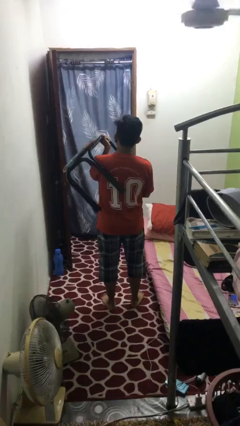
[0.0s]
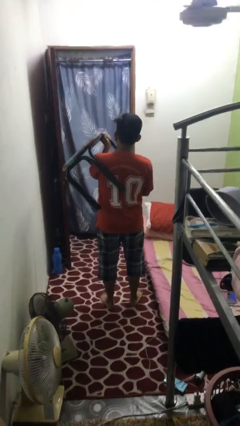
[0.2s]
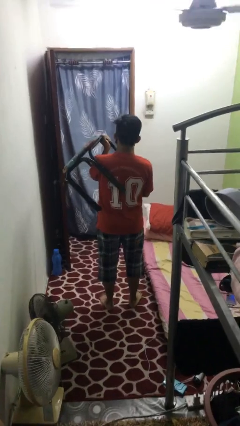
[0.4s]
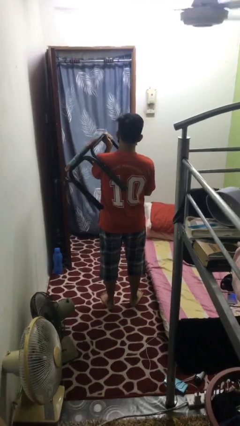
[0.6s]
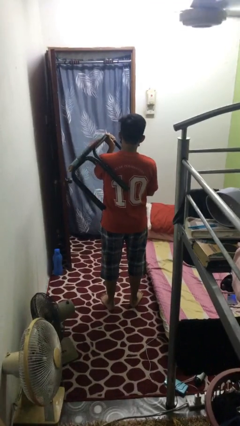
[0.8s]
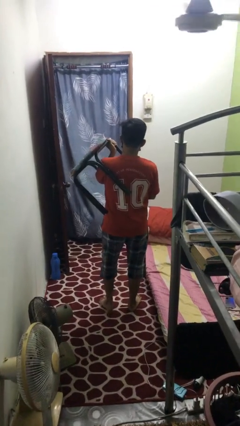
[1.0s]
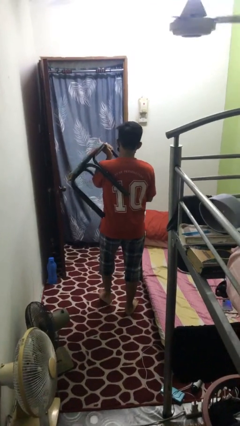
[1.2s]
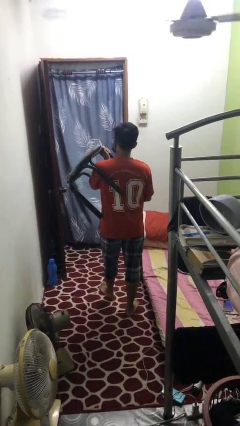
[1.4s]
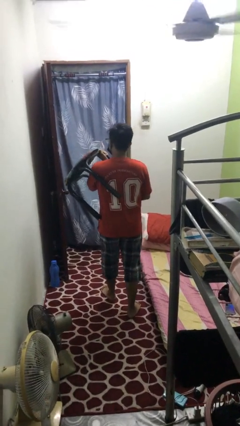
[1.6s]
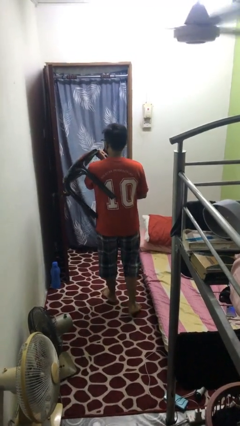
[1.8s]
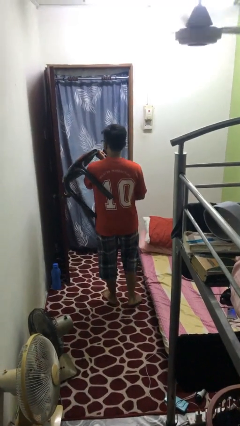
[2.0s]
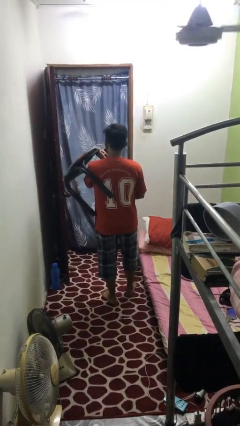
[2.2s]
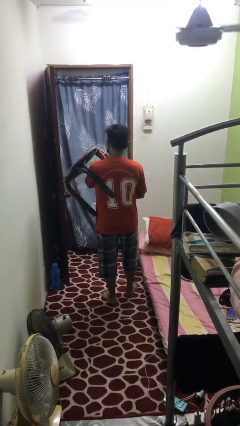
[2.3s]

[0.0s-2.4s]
person carries furniture

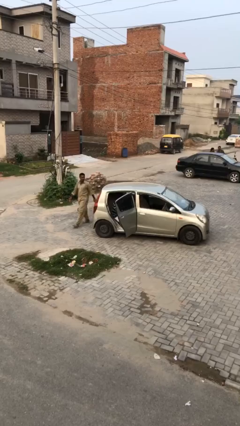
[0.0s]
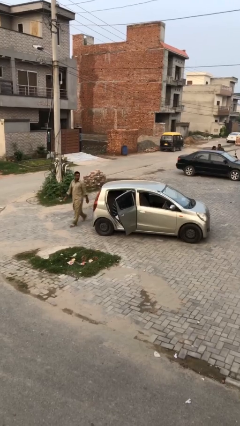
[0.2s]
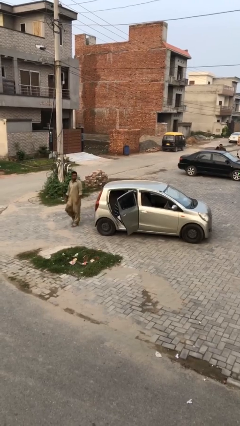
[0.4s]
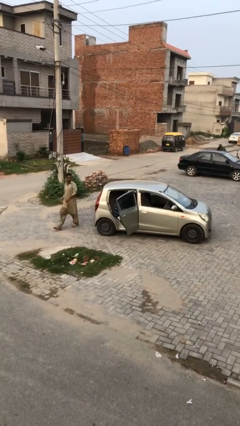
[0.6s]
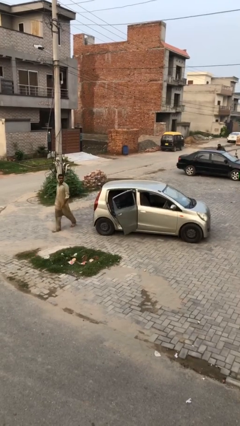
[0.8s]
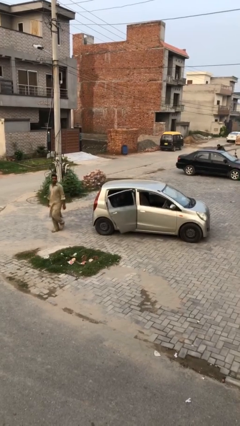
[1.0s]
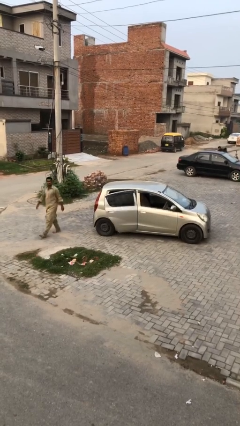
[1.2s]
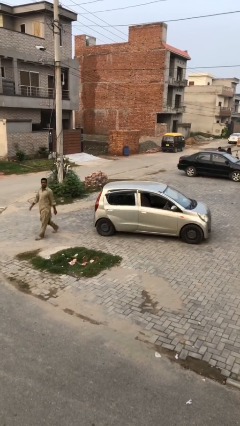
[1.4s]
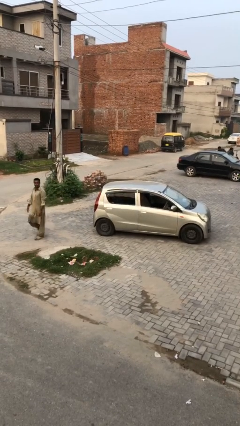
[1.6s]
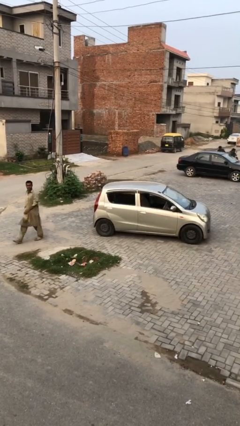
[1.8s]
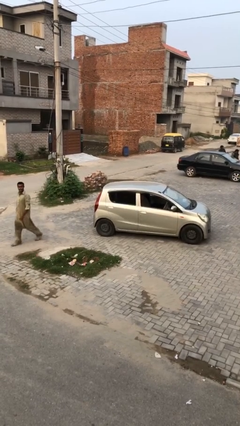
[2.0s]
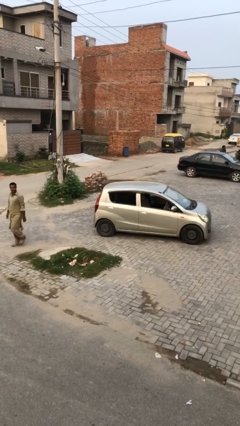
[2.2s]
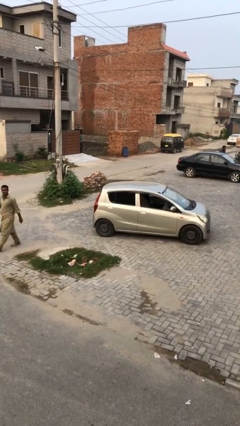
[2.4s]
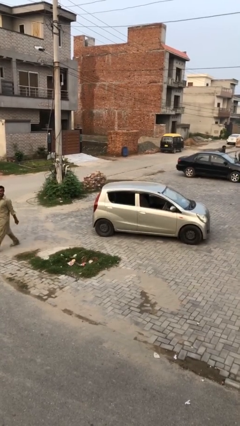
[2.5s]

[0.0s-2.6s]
person closes car door

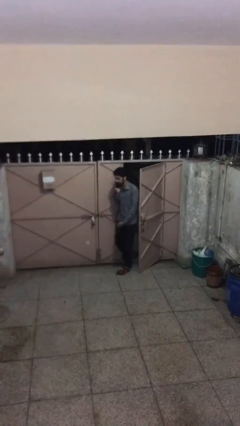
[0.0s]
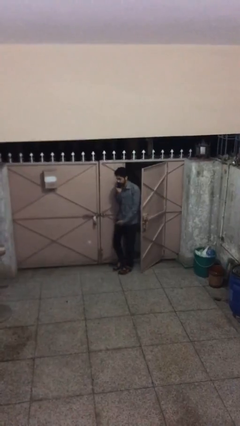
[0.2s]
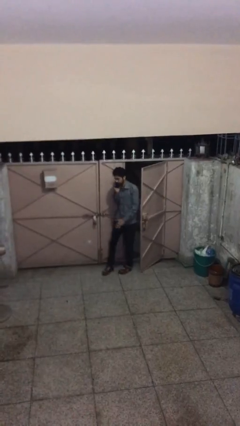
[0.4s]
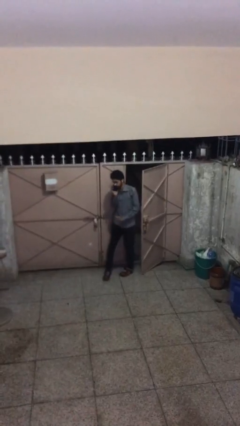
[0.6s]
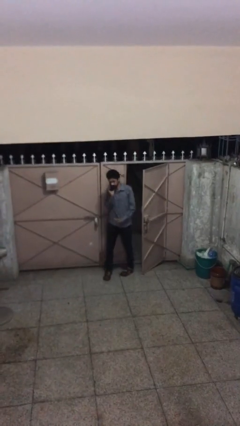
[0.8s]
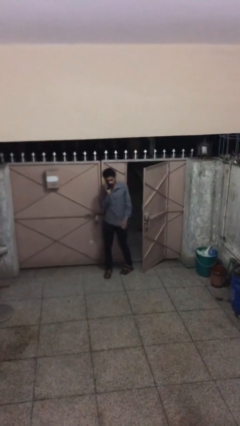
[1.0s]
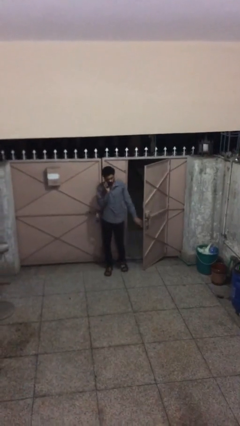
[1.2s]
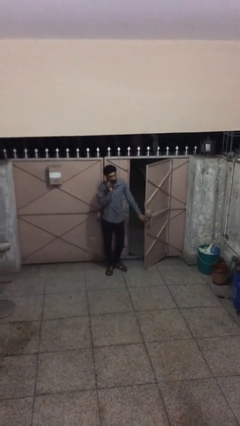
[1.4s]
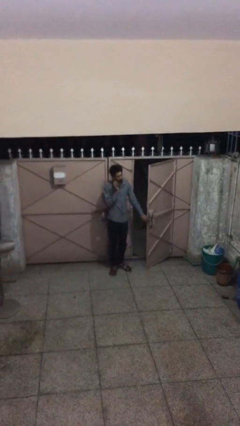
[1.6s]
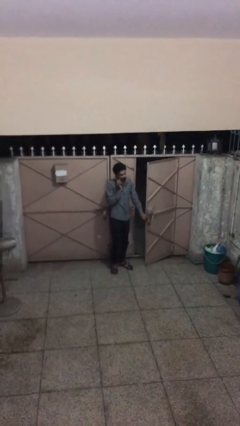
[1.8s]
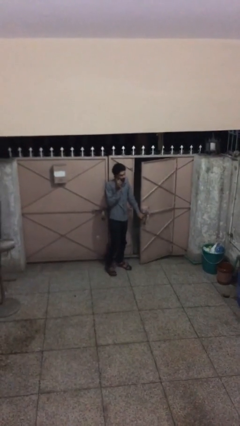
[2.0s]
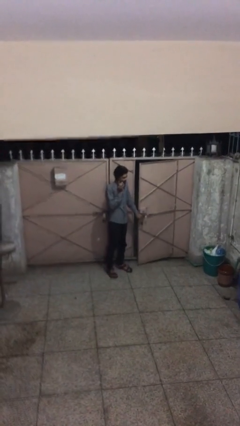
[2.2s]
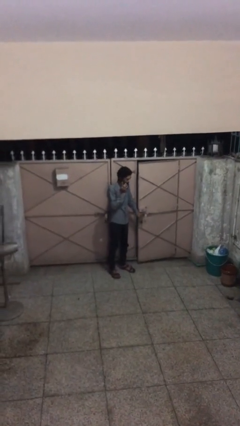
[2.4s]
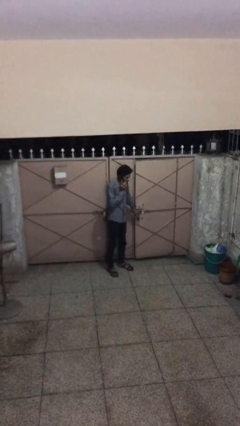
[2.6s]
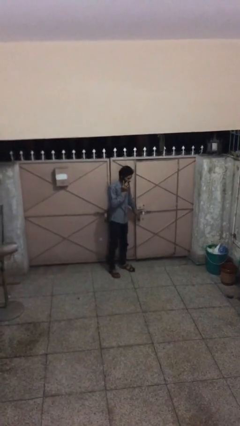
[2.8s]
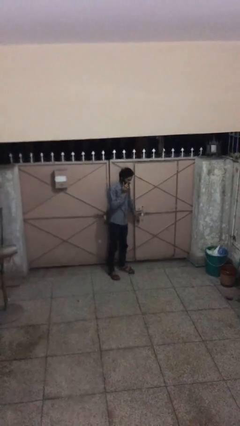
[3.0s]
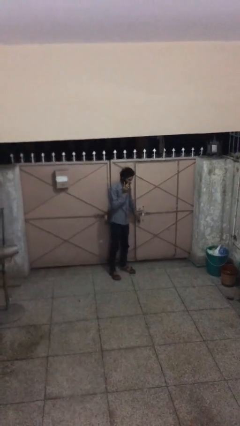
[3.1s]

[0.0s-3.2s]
person closes facility door

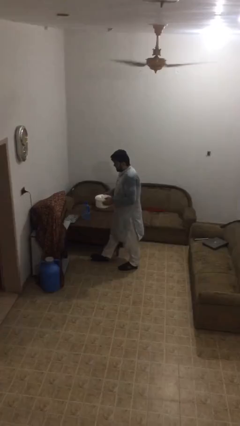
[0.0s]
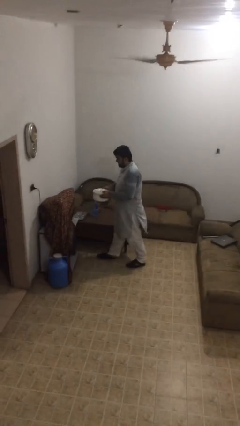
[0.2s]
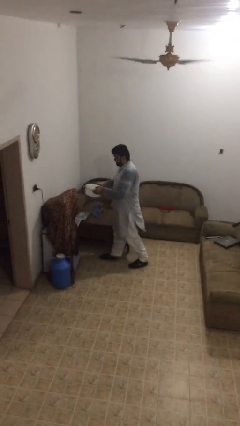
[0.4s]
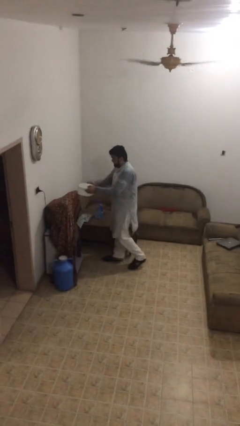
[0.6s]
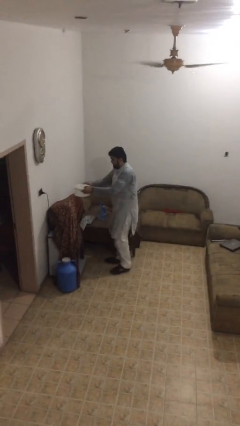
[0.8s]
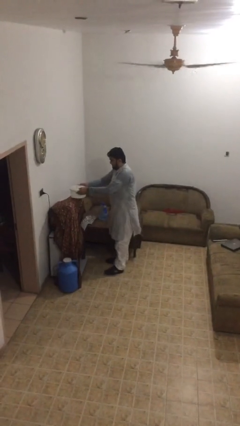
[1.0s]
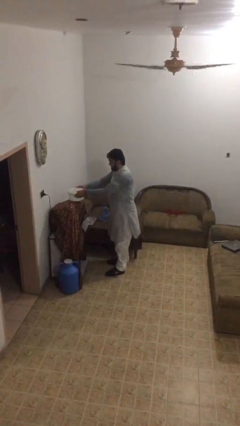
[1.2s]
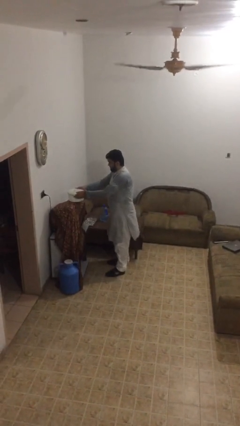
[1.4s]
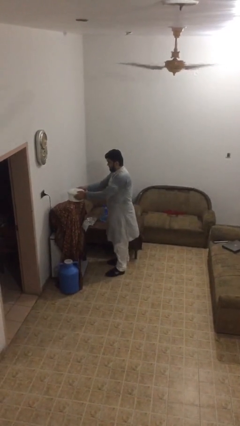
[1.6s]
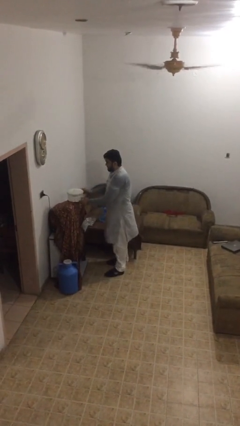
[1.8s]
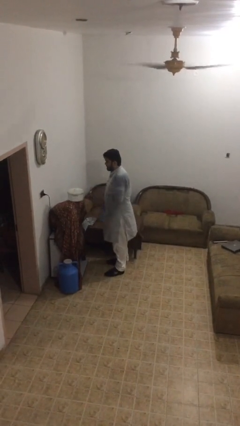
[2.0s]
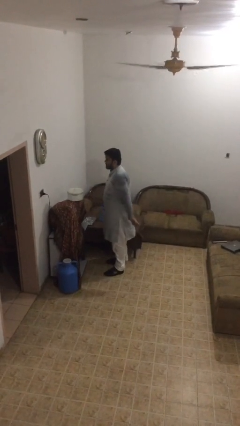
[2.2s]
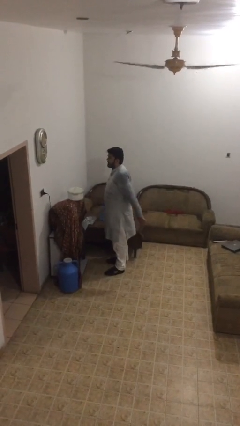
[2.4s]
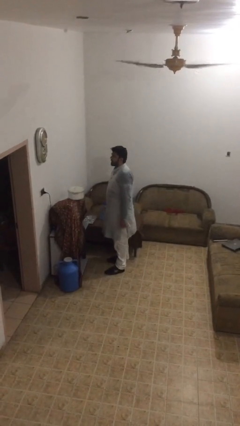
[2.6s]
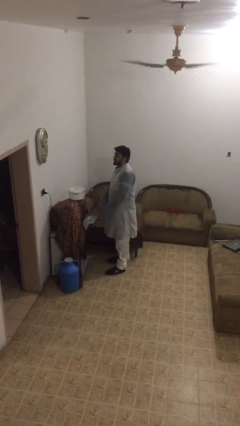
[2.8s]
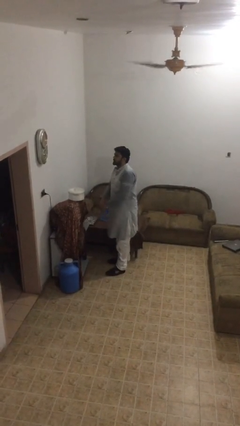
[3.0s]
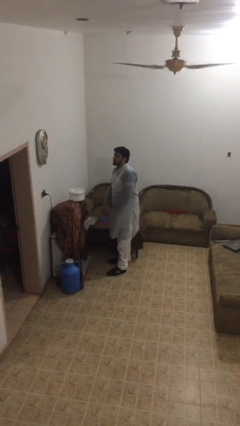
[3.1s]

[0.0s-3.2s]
person puts down object on shelf

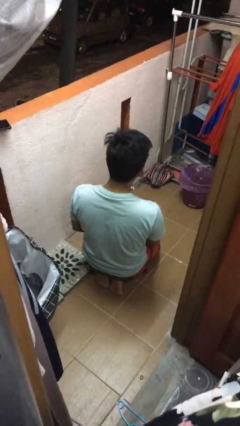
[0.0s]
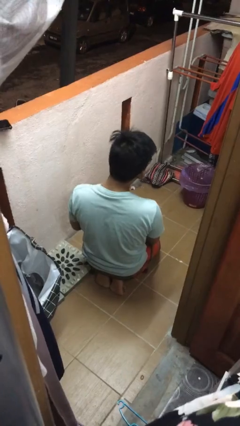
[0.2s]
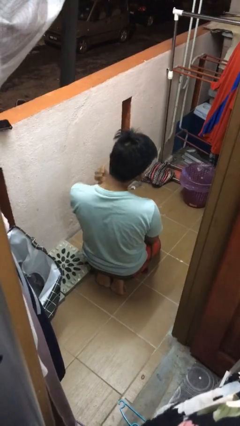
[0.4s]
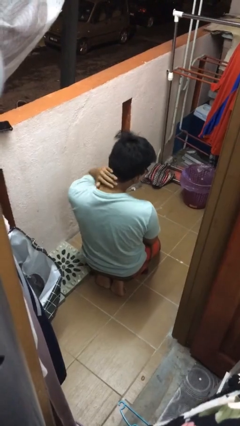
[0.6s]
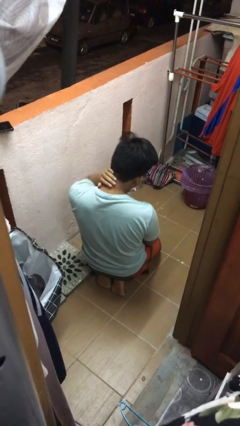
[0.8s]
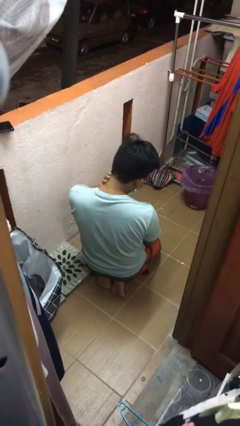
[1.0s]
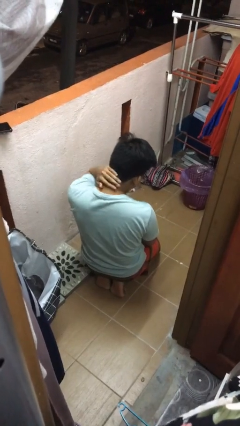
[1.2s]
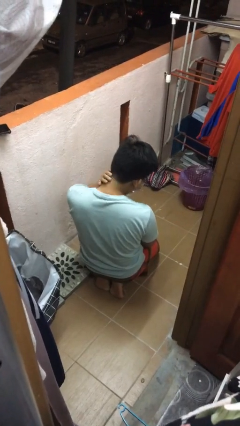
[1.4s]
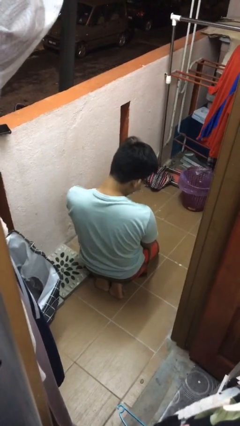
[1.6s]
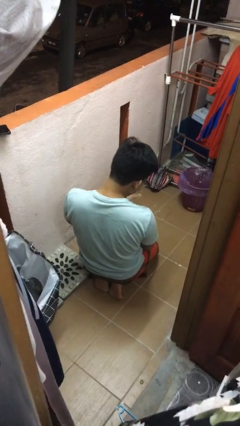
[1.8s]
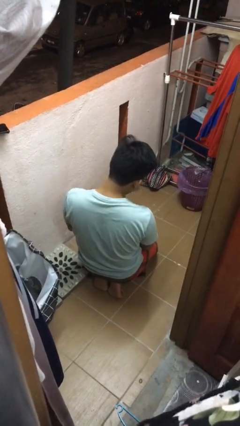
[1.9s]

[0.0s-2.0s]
person rubs neck

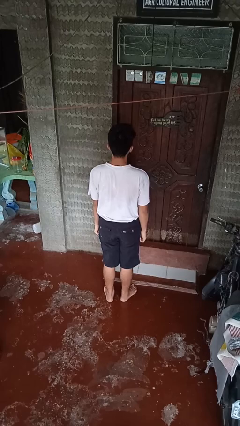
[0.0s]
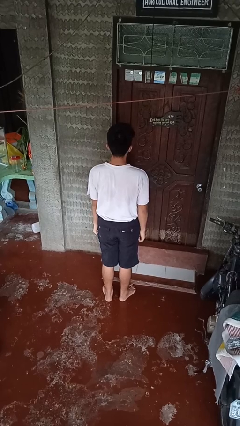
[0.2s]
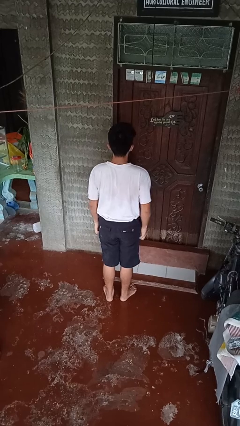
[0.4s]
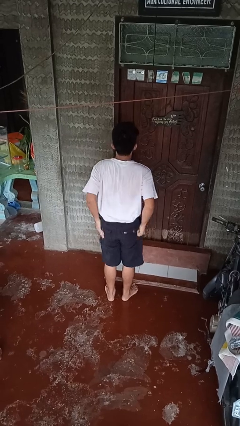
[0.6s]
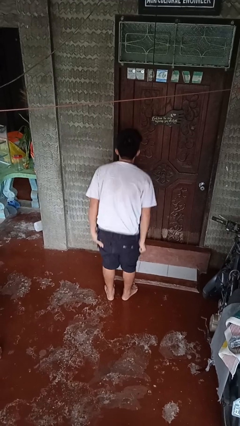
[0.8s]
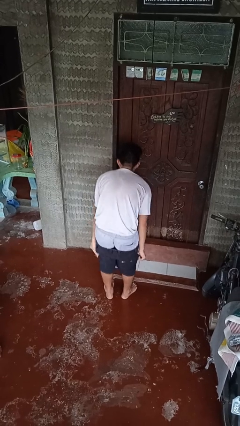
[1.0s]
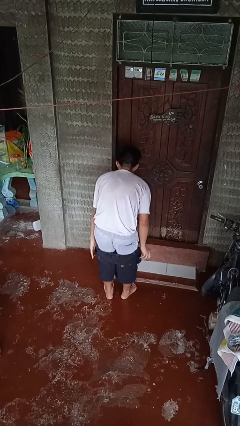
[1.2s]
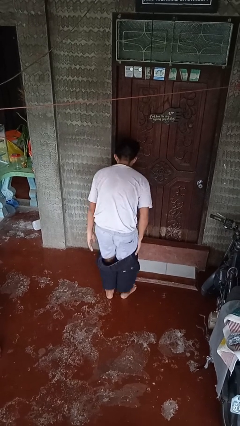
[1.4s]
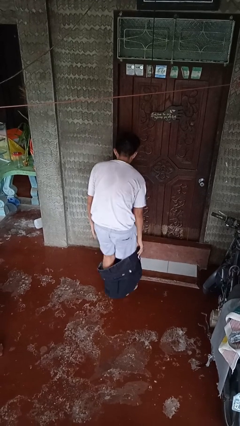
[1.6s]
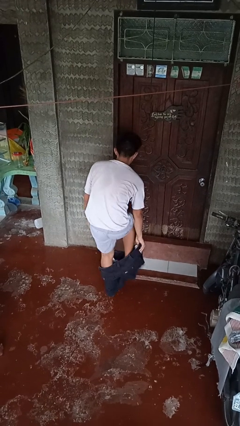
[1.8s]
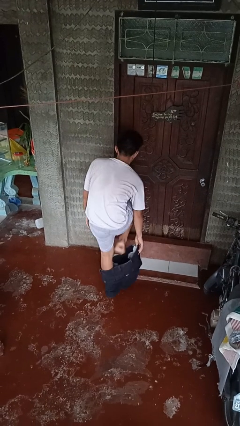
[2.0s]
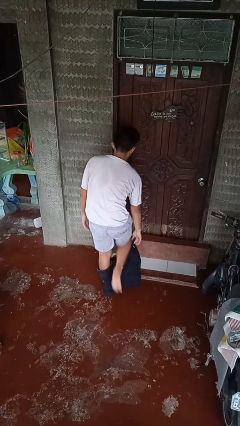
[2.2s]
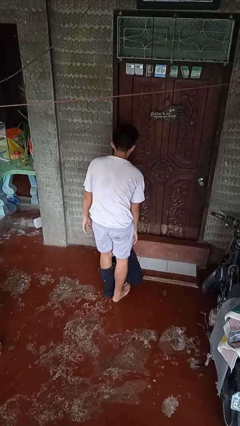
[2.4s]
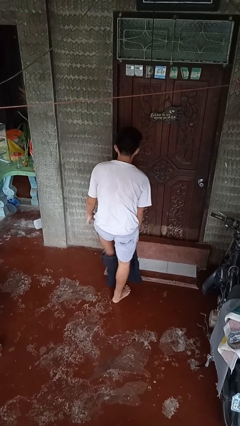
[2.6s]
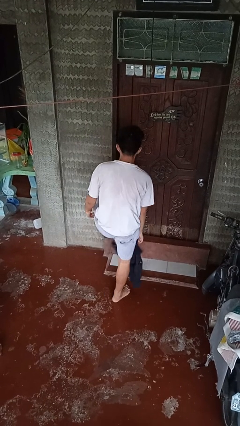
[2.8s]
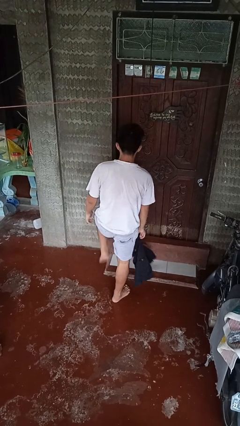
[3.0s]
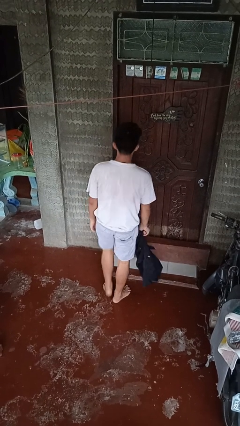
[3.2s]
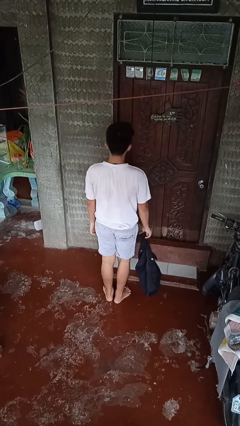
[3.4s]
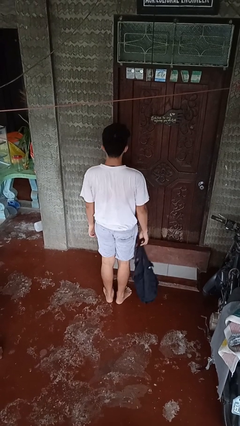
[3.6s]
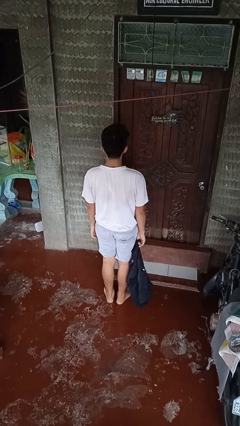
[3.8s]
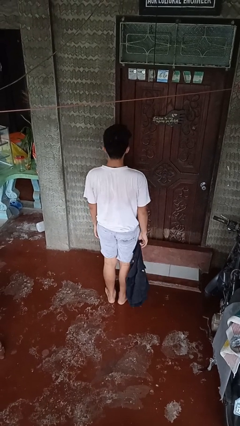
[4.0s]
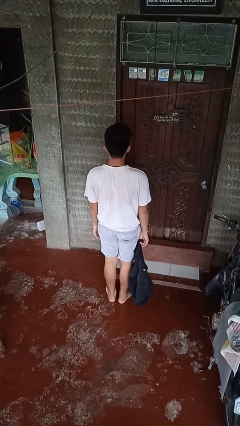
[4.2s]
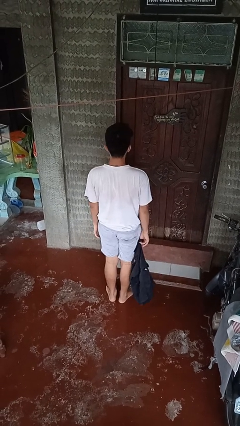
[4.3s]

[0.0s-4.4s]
person takes off pants
